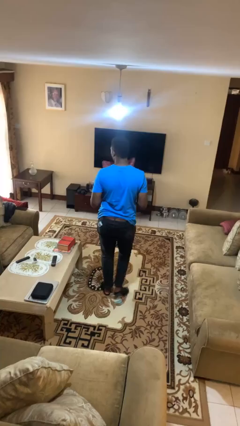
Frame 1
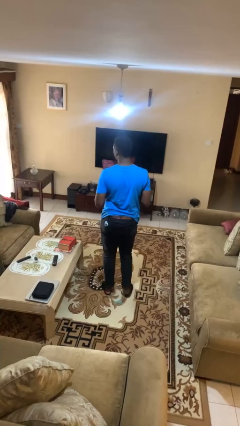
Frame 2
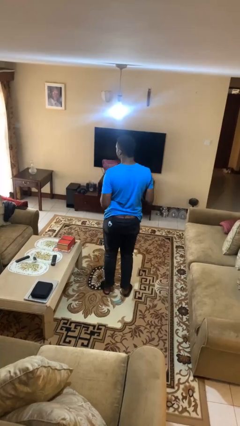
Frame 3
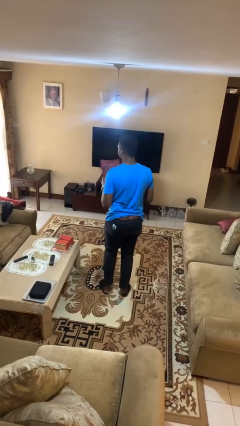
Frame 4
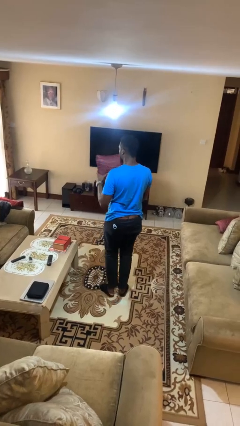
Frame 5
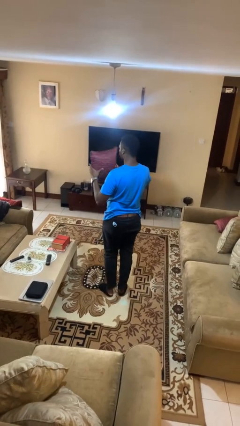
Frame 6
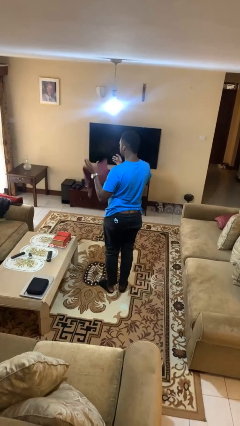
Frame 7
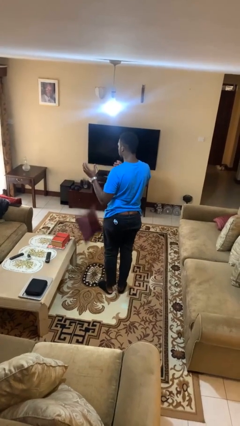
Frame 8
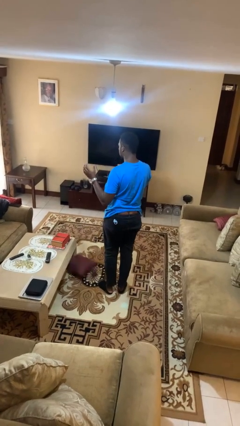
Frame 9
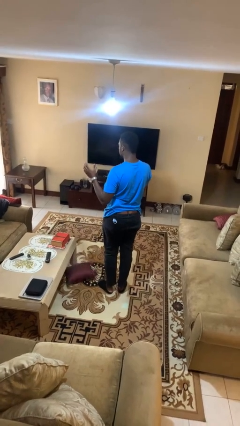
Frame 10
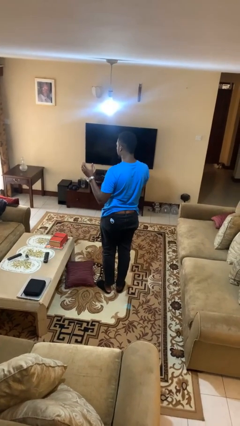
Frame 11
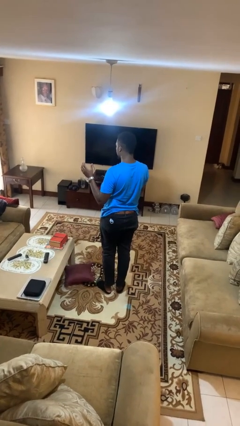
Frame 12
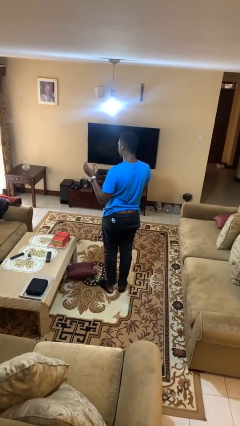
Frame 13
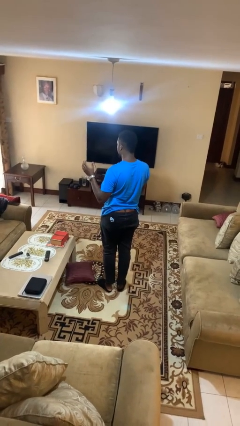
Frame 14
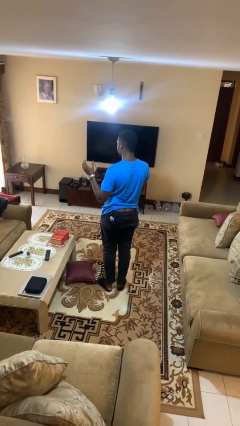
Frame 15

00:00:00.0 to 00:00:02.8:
person drops object

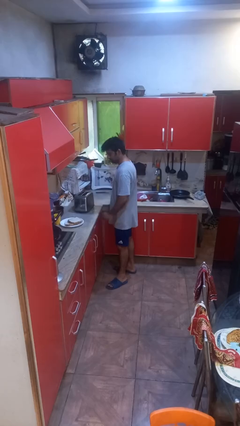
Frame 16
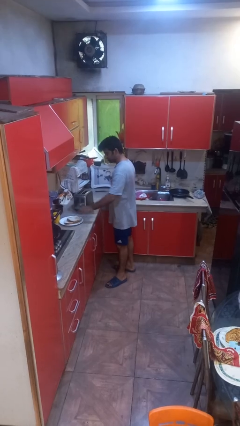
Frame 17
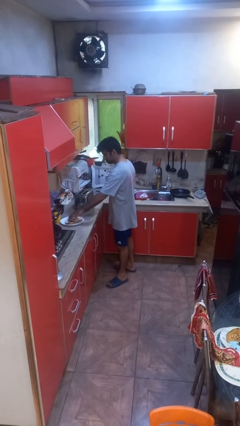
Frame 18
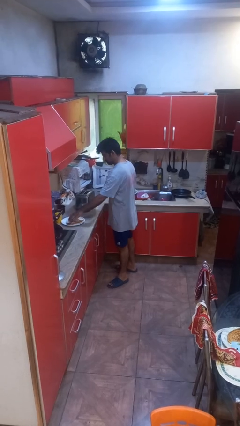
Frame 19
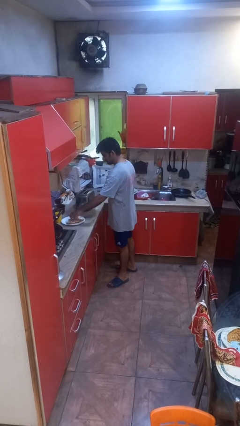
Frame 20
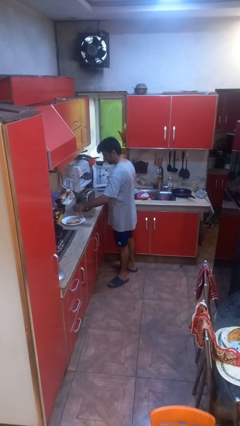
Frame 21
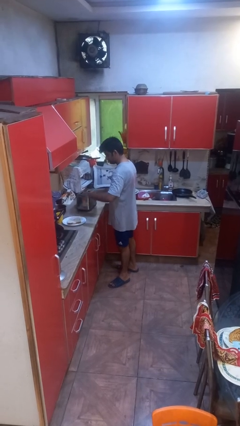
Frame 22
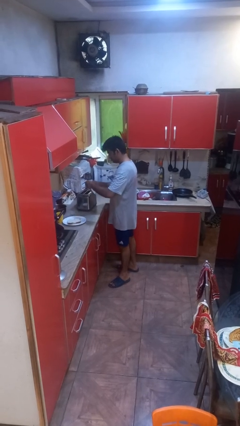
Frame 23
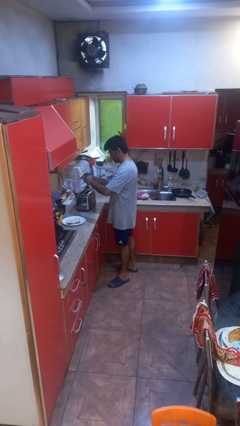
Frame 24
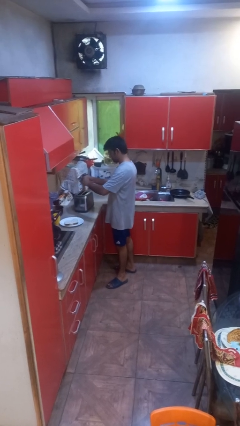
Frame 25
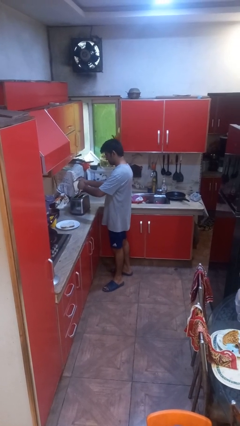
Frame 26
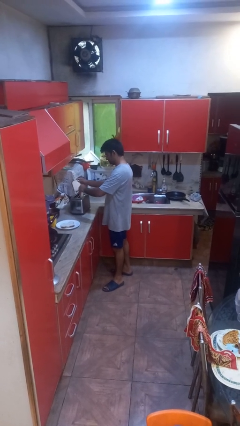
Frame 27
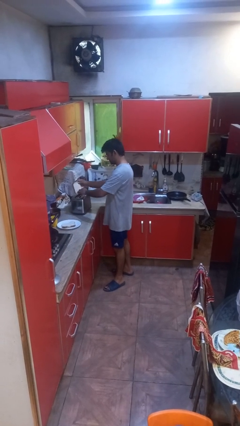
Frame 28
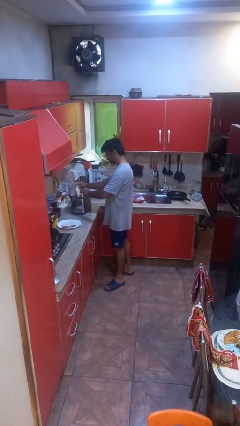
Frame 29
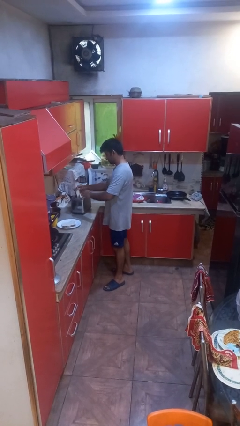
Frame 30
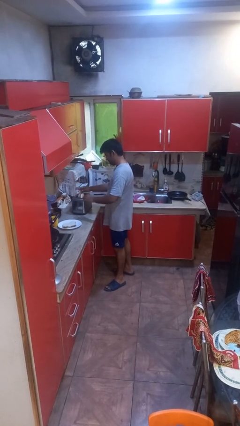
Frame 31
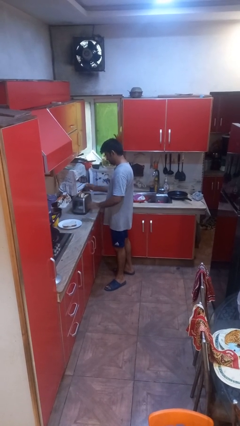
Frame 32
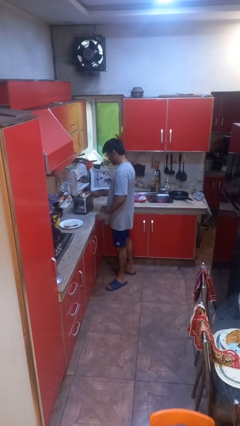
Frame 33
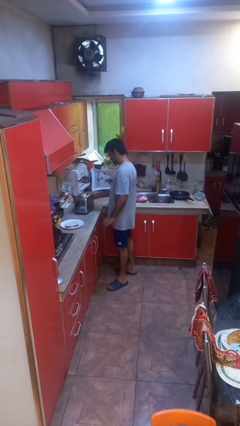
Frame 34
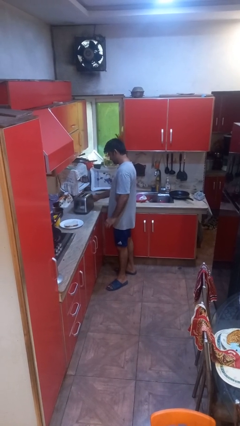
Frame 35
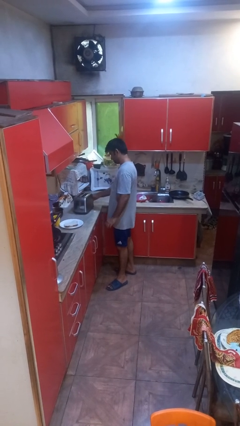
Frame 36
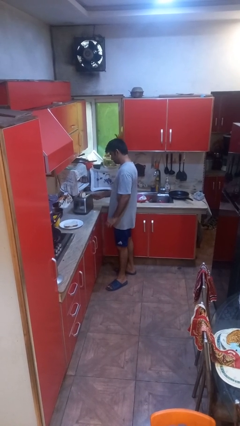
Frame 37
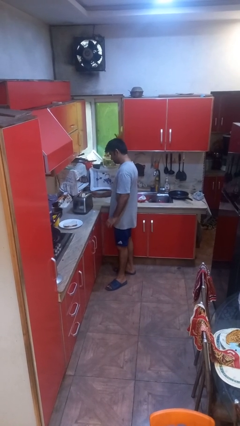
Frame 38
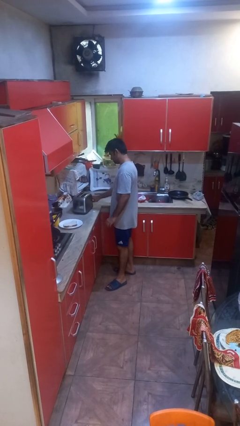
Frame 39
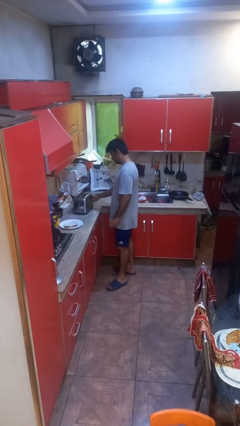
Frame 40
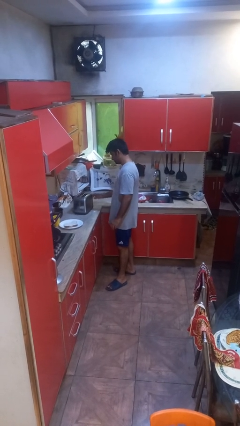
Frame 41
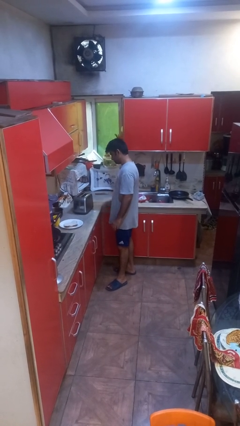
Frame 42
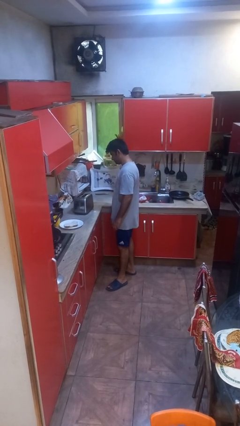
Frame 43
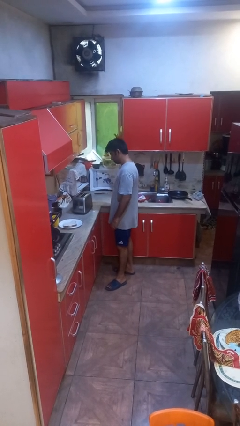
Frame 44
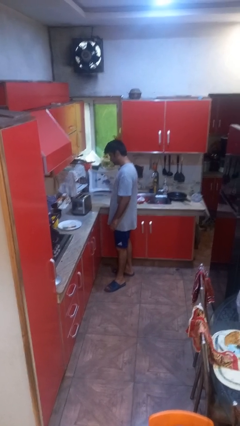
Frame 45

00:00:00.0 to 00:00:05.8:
person puts object into toaster

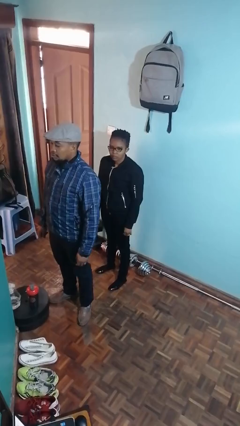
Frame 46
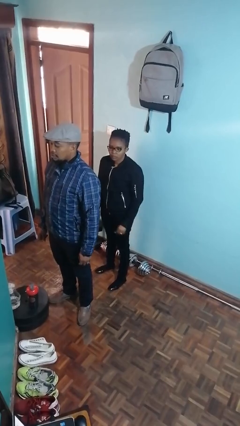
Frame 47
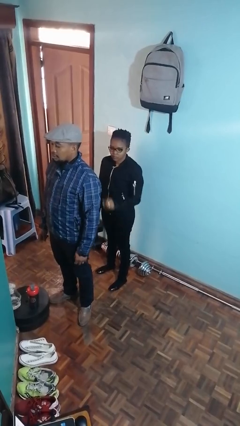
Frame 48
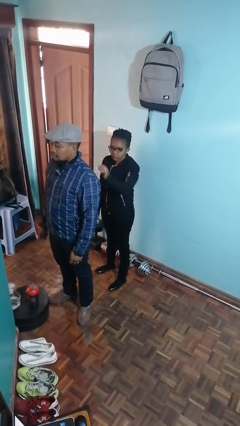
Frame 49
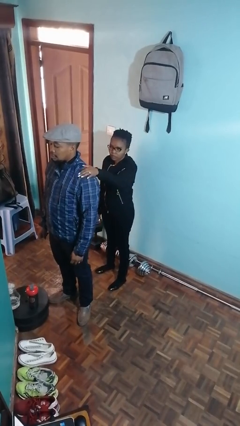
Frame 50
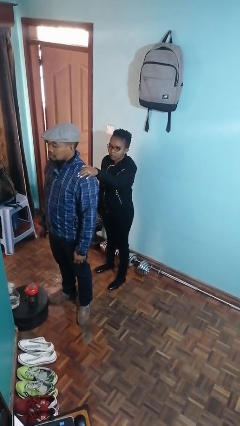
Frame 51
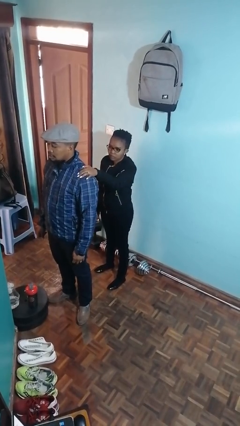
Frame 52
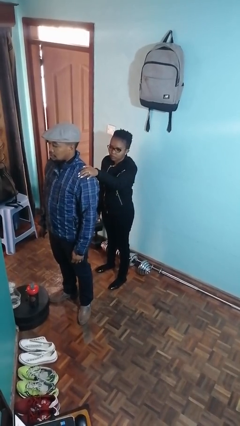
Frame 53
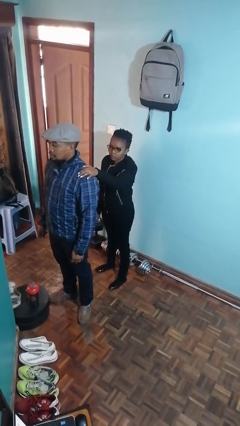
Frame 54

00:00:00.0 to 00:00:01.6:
person grabs person by shoulder

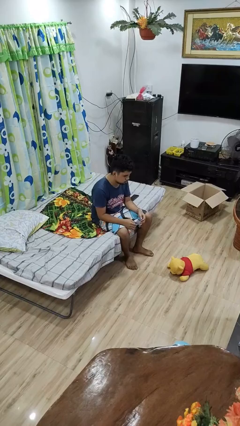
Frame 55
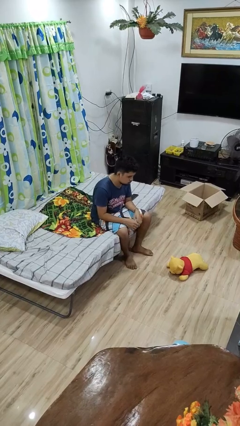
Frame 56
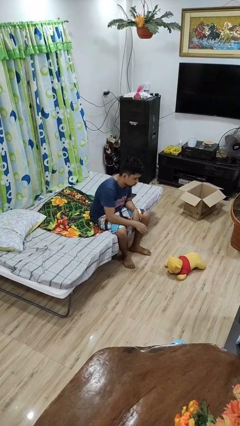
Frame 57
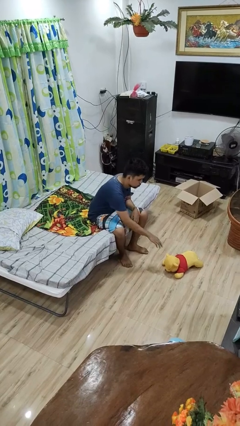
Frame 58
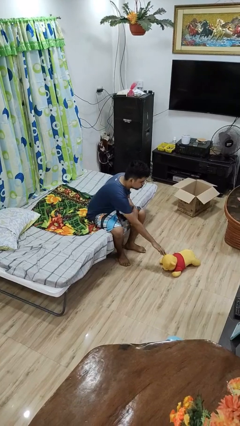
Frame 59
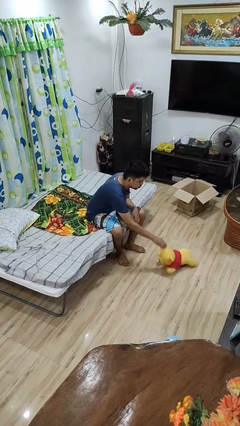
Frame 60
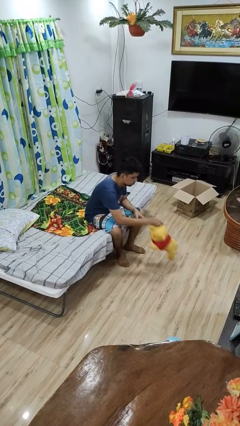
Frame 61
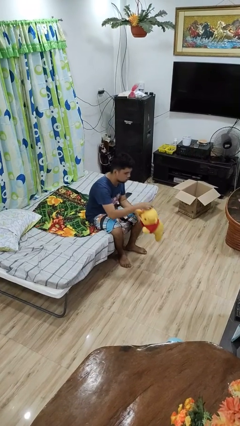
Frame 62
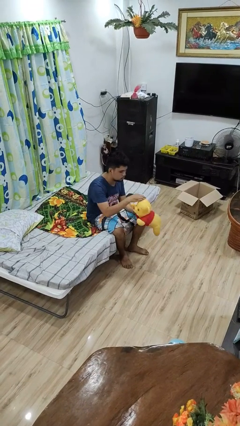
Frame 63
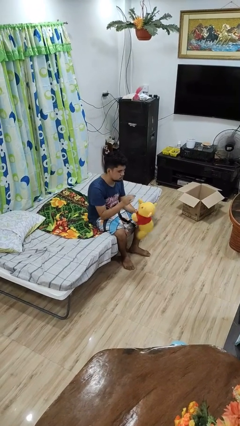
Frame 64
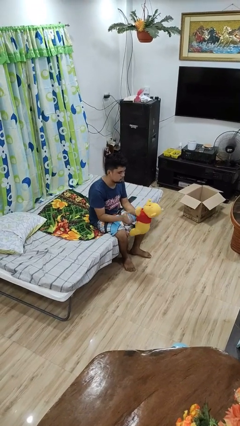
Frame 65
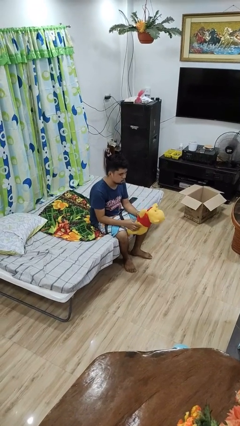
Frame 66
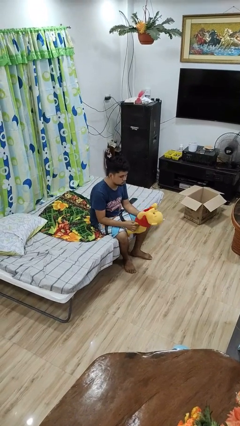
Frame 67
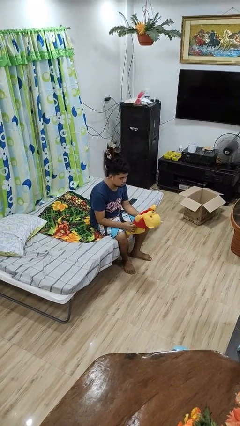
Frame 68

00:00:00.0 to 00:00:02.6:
person picks up object from floor

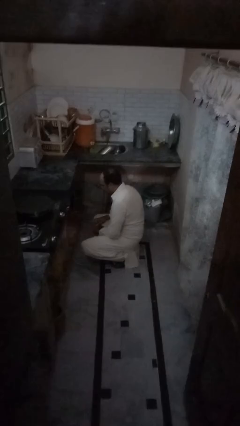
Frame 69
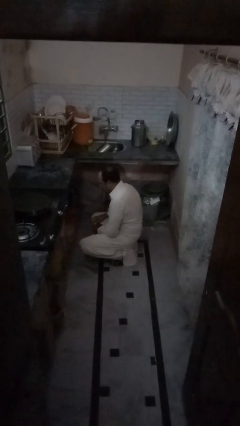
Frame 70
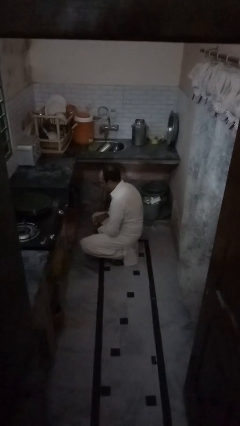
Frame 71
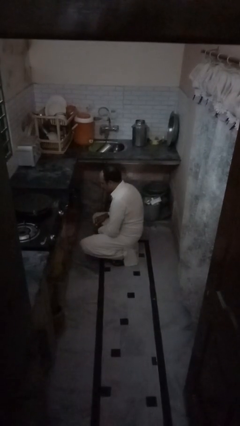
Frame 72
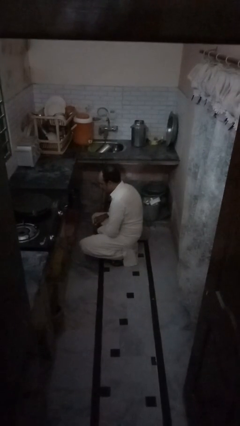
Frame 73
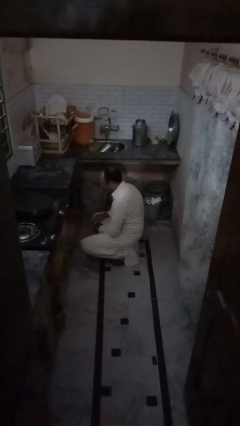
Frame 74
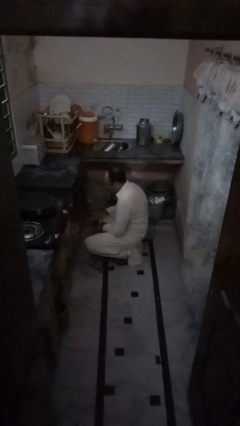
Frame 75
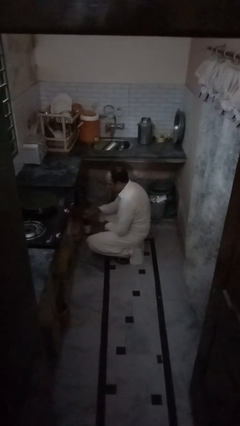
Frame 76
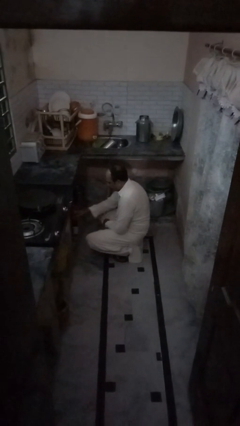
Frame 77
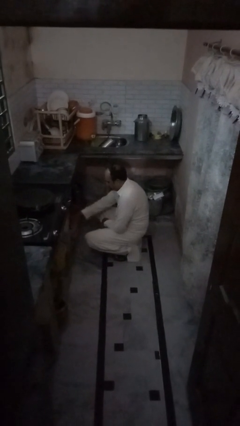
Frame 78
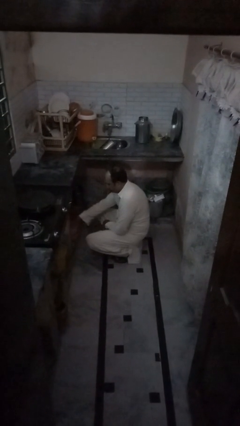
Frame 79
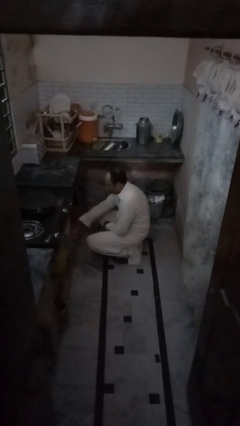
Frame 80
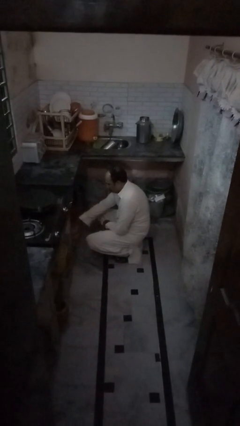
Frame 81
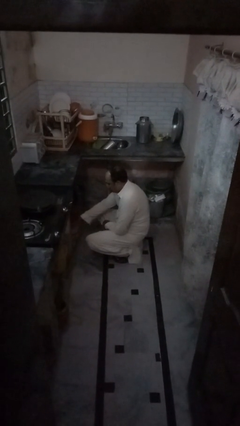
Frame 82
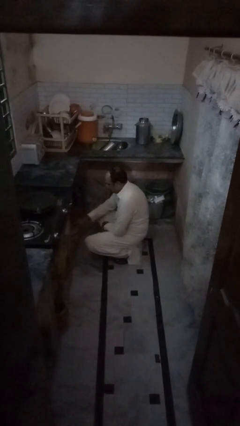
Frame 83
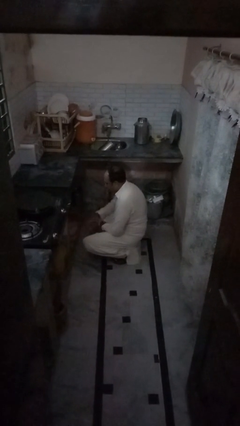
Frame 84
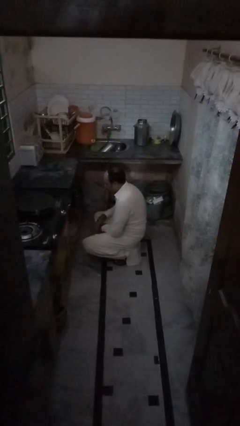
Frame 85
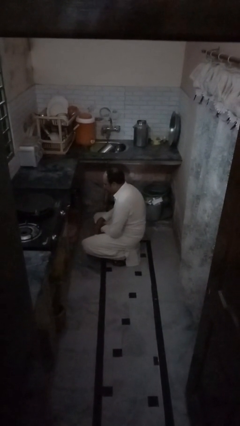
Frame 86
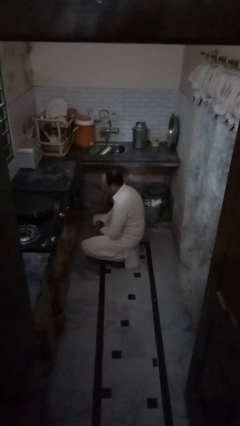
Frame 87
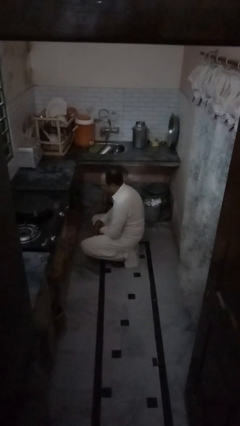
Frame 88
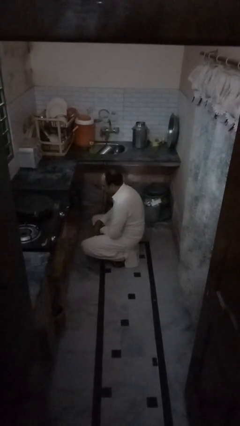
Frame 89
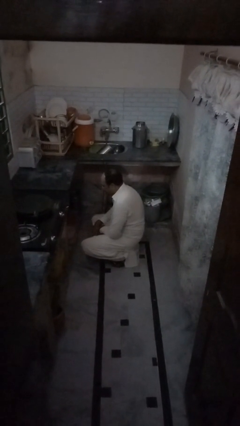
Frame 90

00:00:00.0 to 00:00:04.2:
person puts down object into cabinet

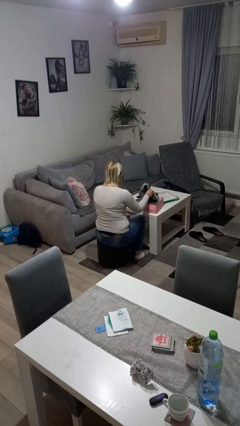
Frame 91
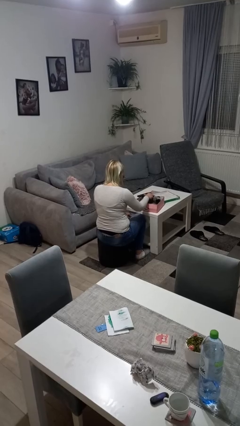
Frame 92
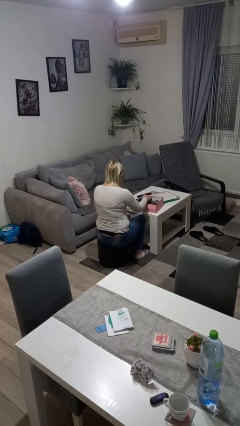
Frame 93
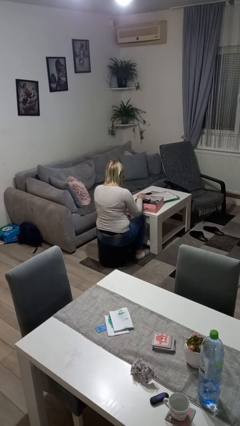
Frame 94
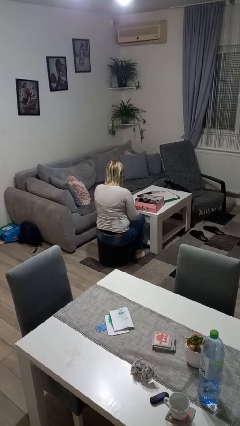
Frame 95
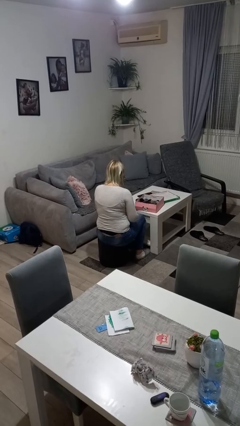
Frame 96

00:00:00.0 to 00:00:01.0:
person puts object into box
